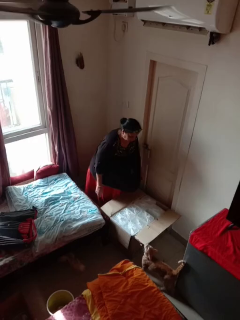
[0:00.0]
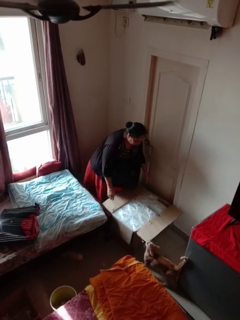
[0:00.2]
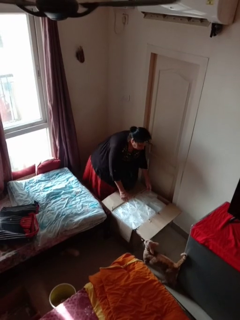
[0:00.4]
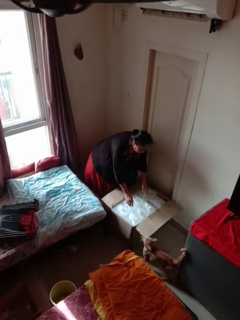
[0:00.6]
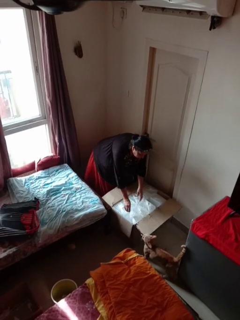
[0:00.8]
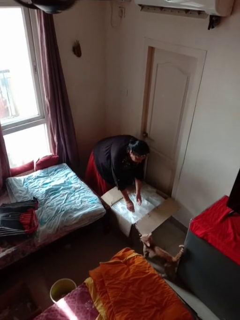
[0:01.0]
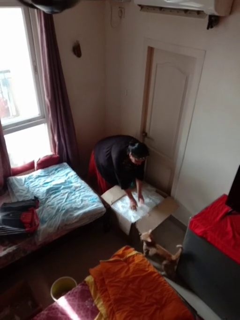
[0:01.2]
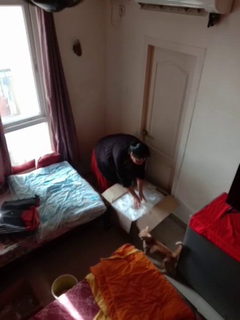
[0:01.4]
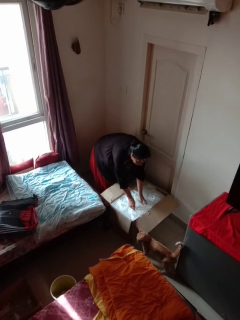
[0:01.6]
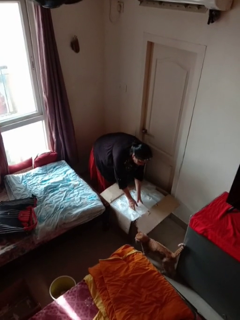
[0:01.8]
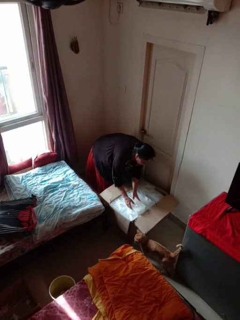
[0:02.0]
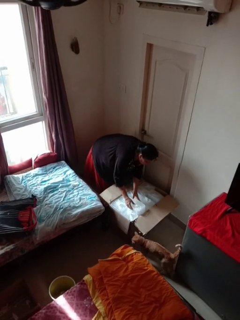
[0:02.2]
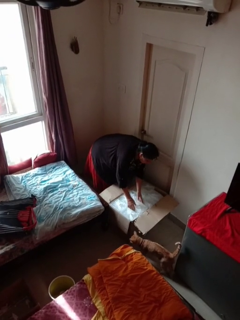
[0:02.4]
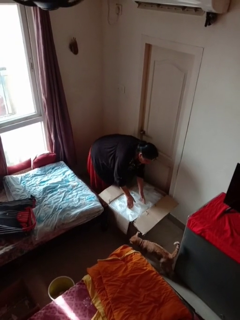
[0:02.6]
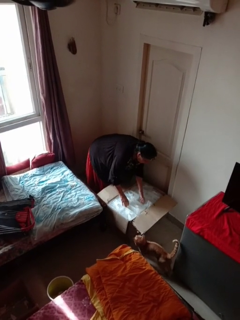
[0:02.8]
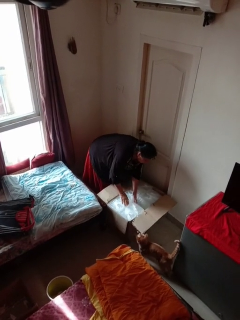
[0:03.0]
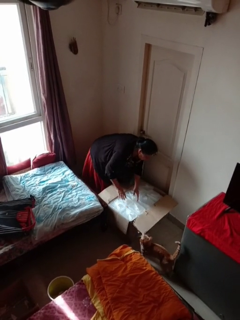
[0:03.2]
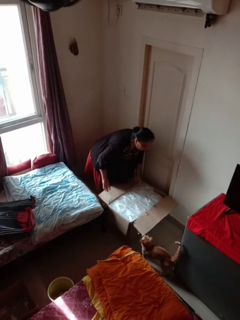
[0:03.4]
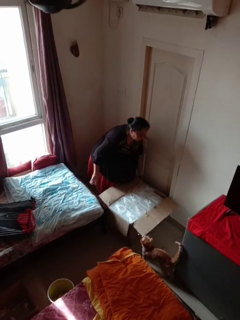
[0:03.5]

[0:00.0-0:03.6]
person searches in box

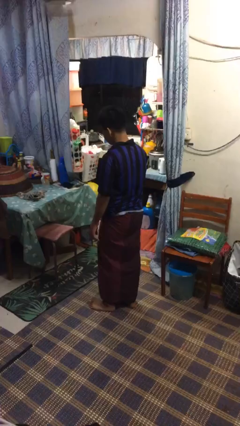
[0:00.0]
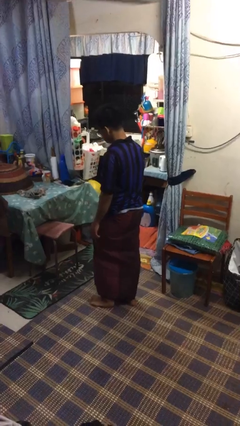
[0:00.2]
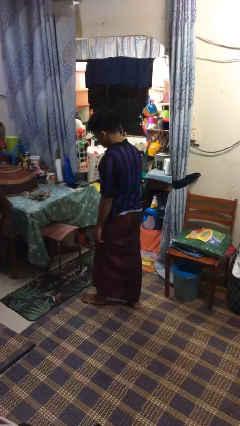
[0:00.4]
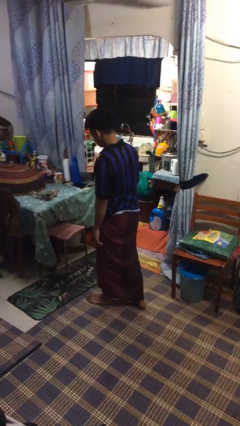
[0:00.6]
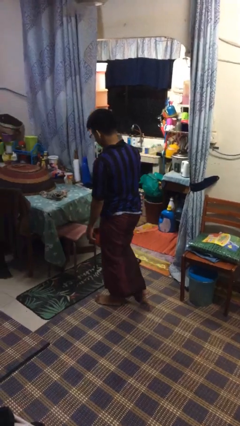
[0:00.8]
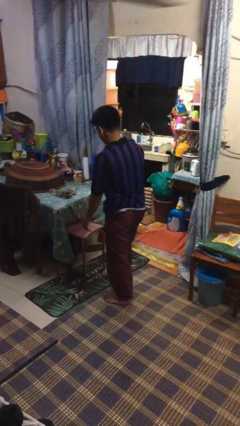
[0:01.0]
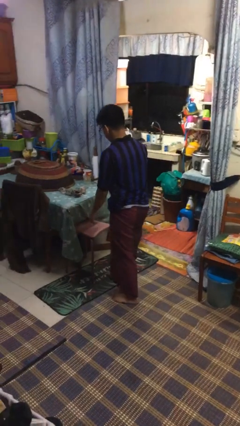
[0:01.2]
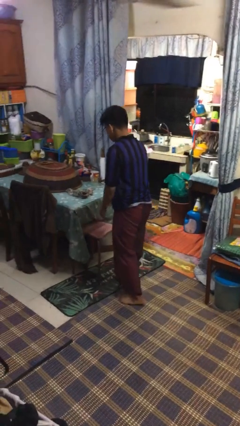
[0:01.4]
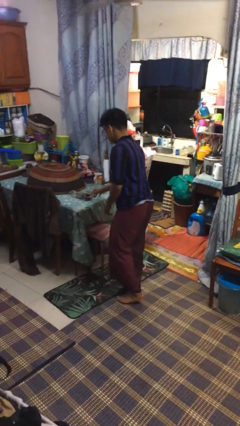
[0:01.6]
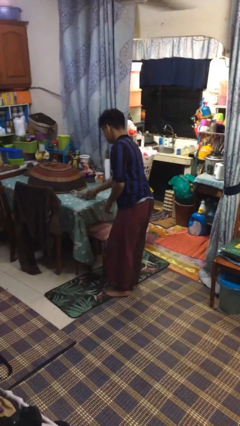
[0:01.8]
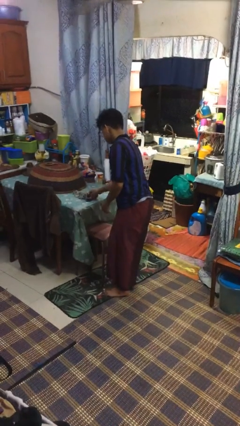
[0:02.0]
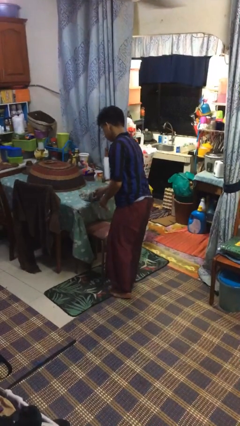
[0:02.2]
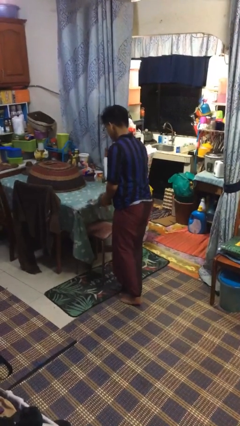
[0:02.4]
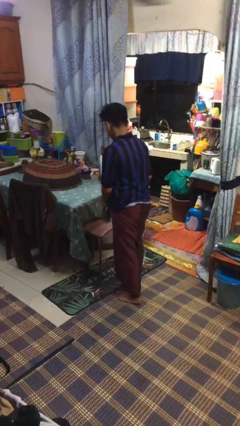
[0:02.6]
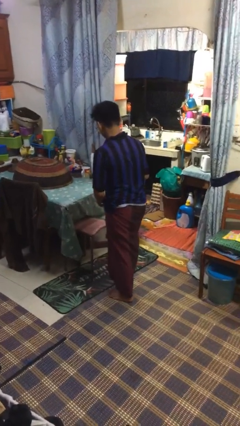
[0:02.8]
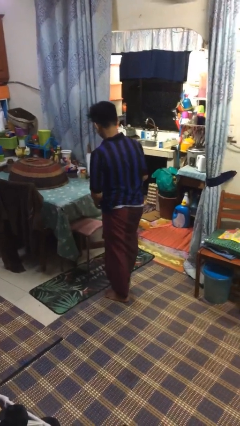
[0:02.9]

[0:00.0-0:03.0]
person picks up object from table

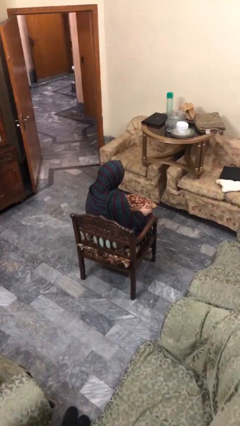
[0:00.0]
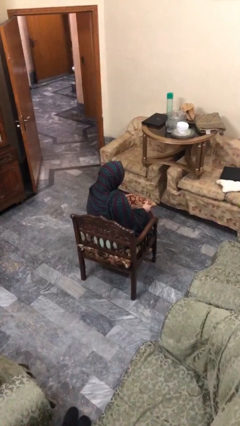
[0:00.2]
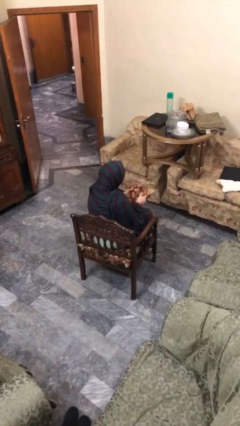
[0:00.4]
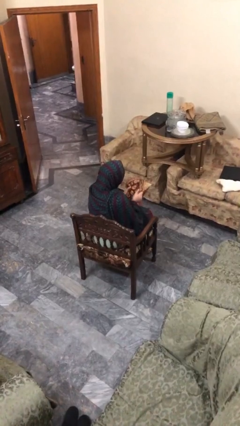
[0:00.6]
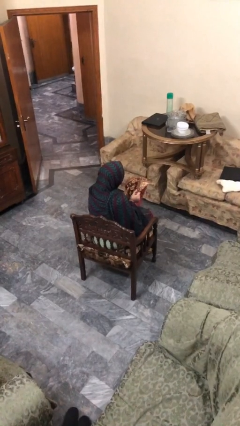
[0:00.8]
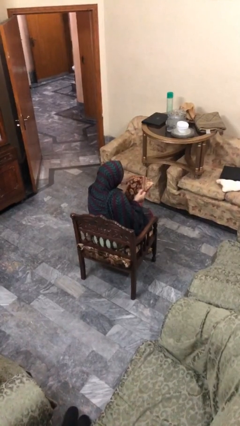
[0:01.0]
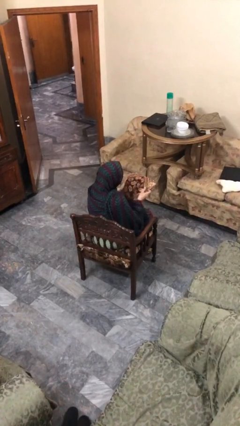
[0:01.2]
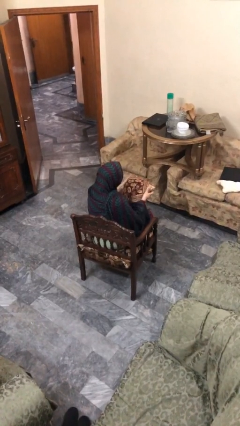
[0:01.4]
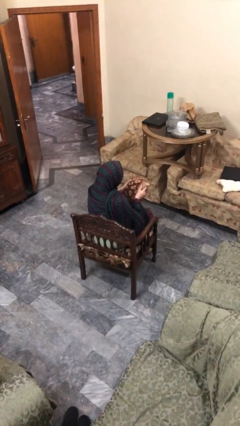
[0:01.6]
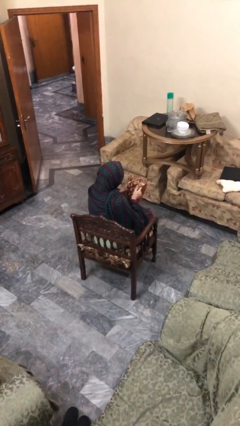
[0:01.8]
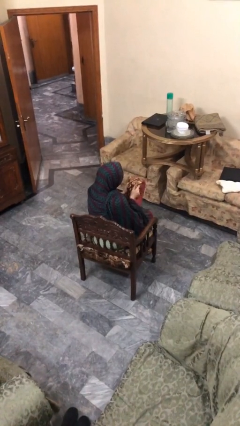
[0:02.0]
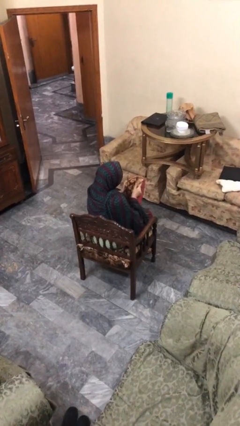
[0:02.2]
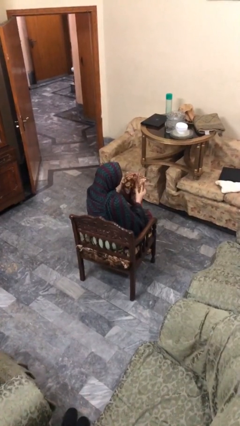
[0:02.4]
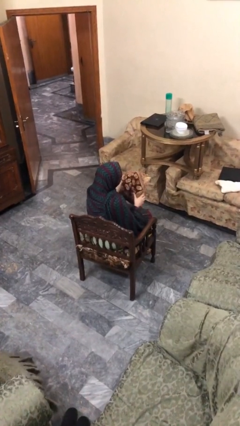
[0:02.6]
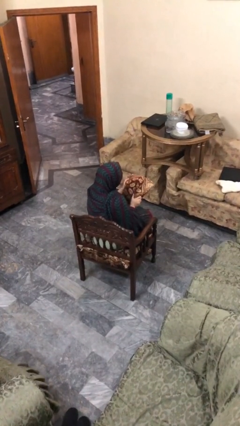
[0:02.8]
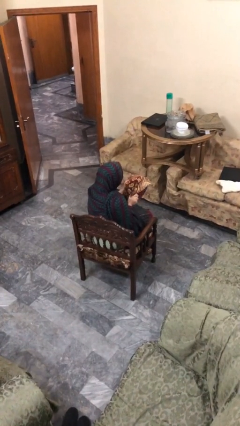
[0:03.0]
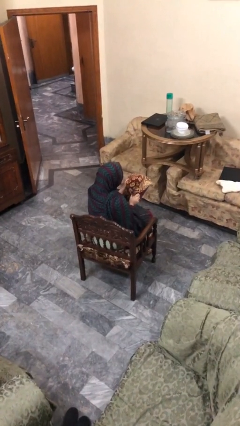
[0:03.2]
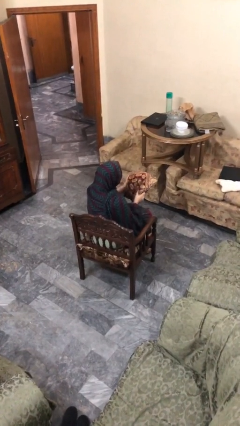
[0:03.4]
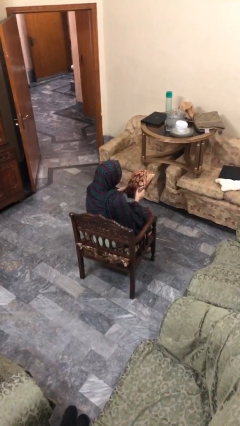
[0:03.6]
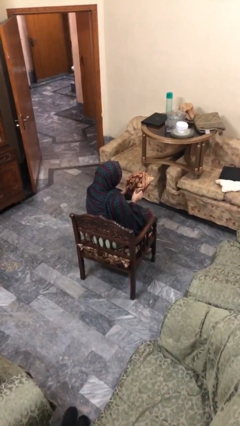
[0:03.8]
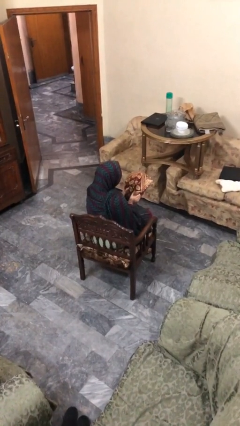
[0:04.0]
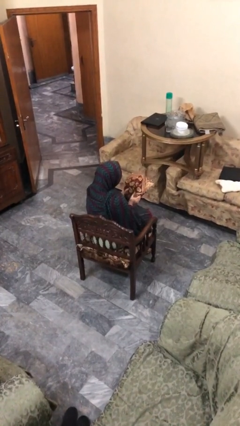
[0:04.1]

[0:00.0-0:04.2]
person squeezes object

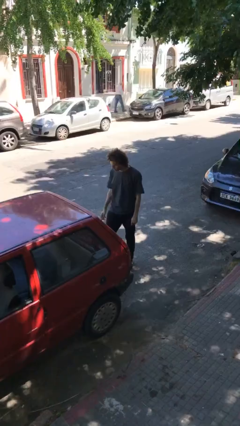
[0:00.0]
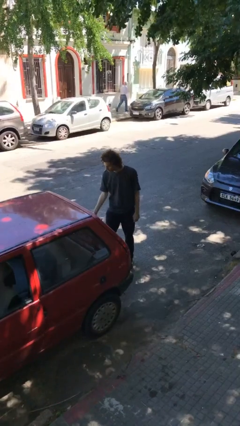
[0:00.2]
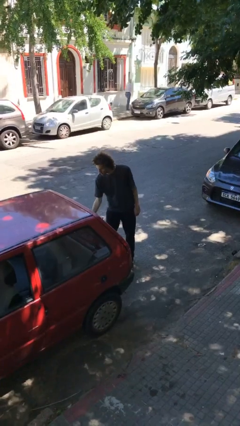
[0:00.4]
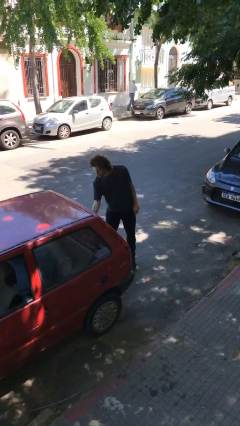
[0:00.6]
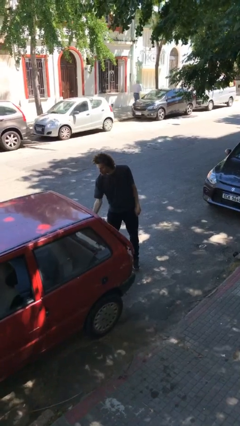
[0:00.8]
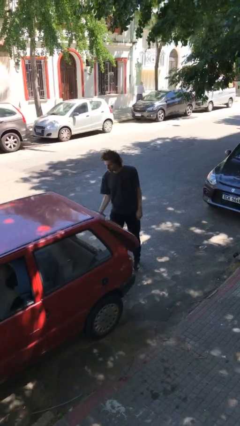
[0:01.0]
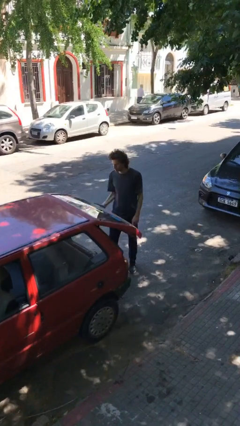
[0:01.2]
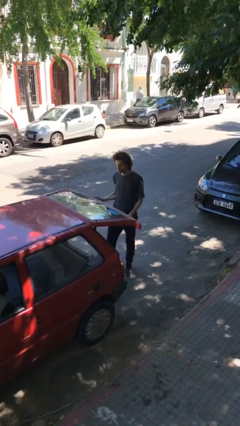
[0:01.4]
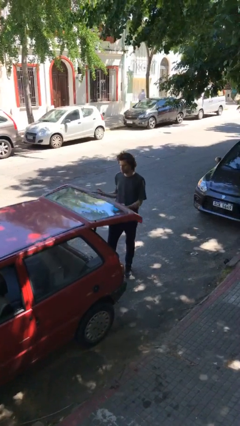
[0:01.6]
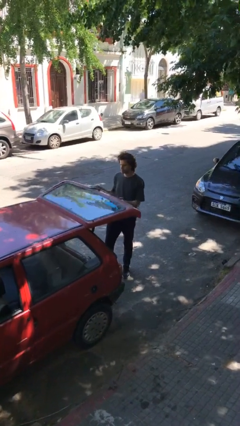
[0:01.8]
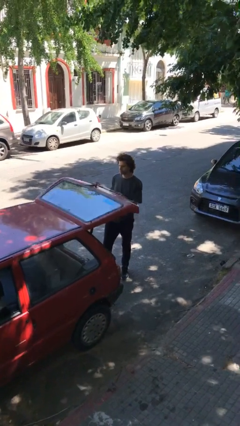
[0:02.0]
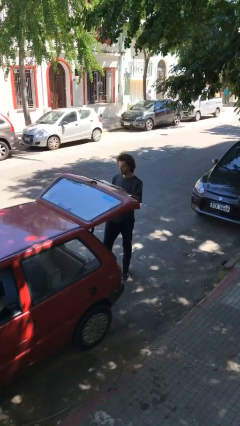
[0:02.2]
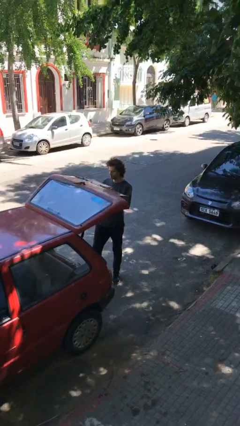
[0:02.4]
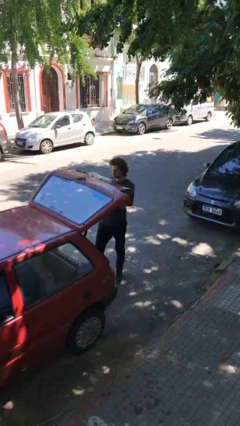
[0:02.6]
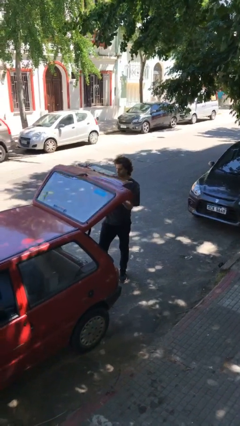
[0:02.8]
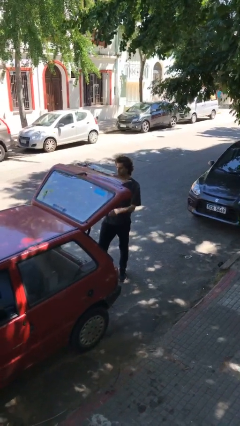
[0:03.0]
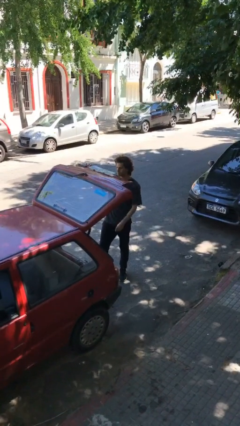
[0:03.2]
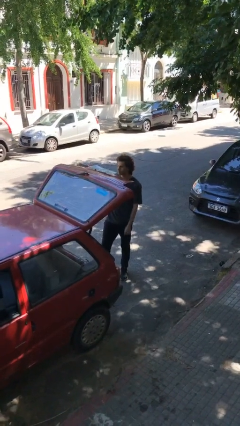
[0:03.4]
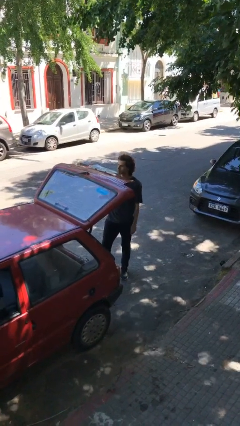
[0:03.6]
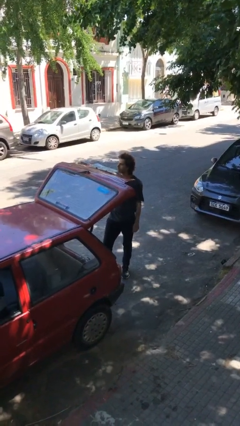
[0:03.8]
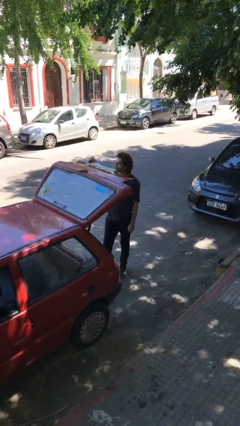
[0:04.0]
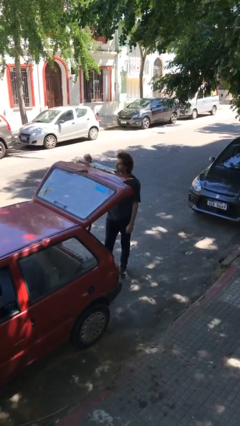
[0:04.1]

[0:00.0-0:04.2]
person opens car trunk

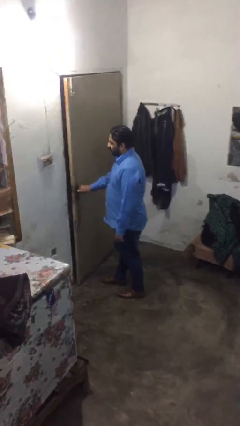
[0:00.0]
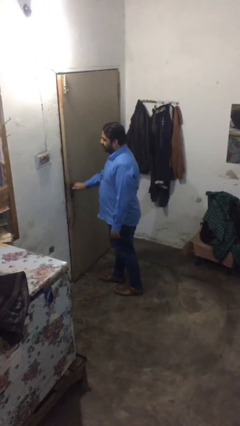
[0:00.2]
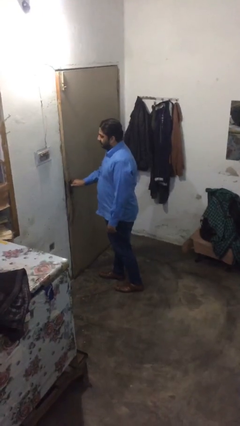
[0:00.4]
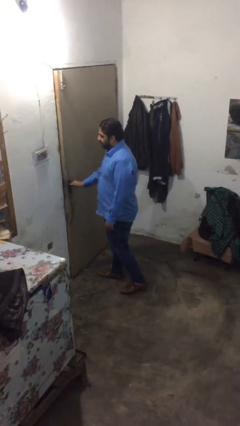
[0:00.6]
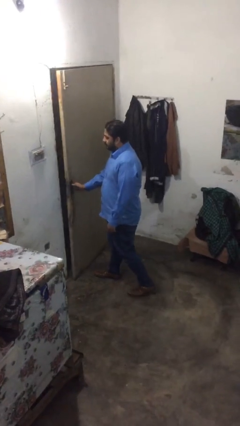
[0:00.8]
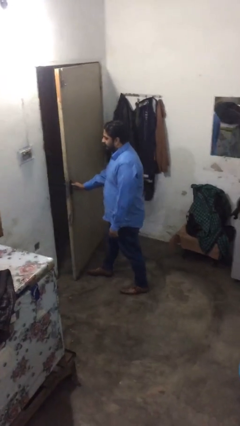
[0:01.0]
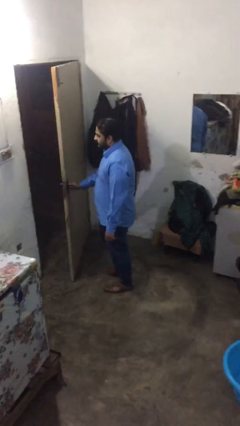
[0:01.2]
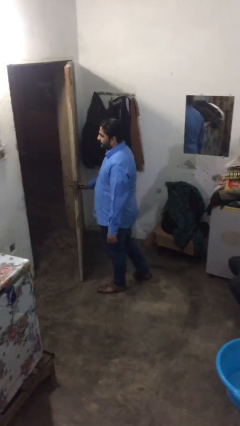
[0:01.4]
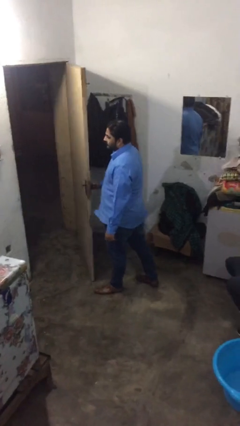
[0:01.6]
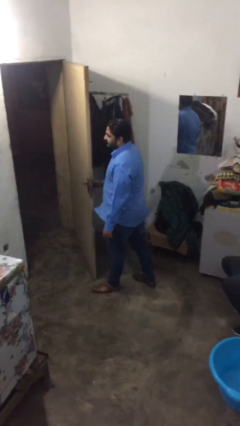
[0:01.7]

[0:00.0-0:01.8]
person opens facility door

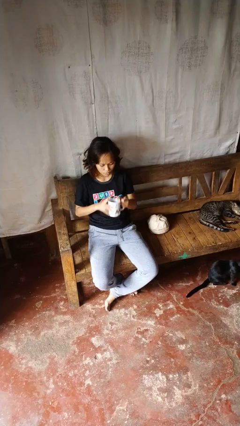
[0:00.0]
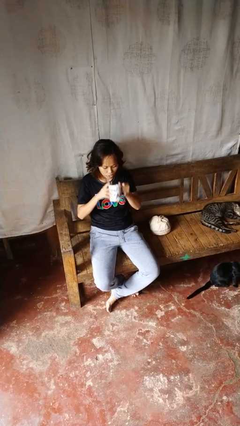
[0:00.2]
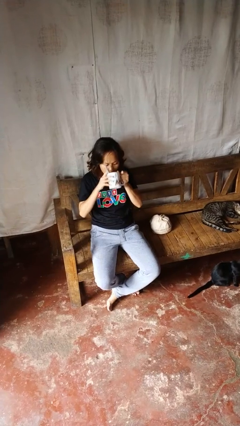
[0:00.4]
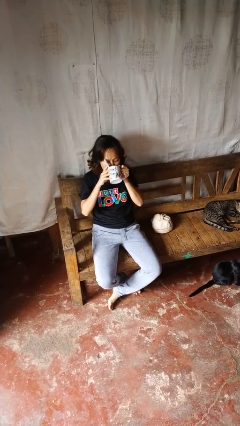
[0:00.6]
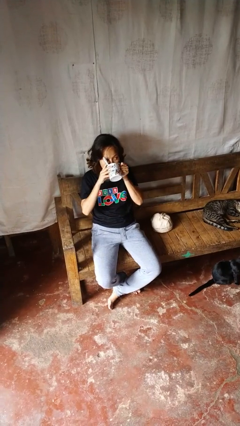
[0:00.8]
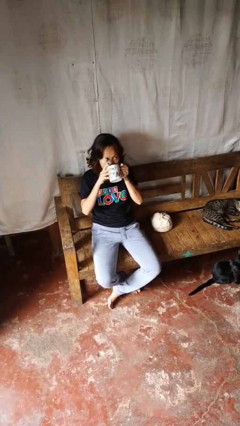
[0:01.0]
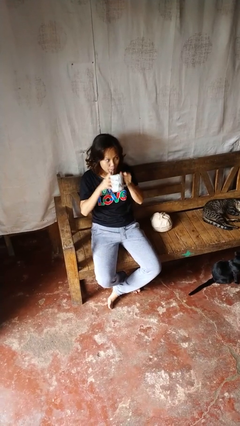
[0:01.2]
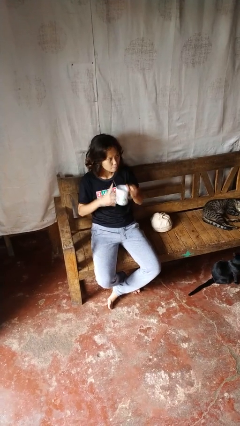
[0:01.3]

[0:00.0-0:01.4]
person drinks from mug

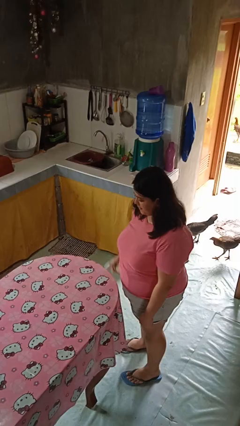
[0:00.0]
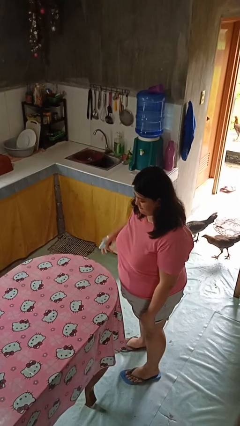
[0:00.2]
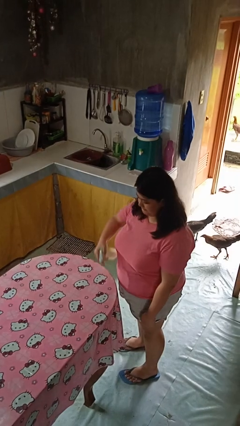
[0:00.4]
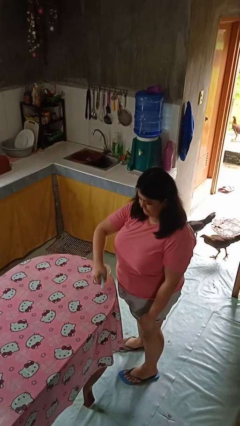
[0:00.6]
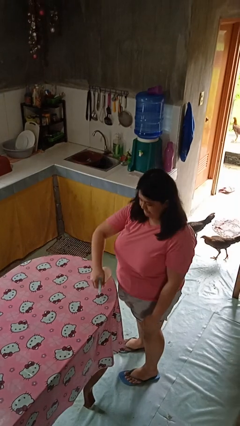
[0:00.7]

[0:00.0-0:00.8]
person sprays from bottle
